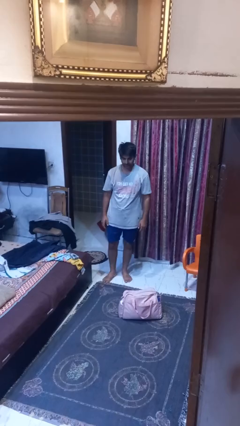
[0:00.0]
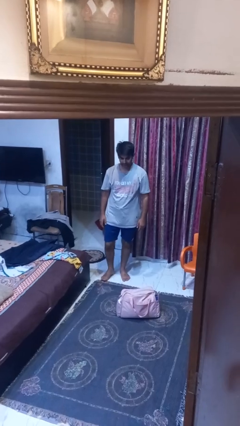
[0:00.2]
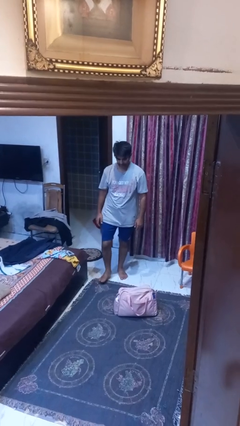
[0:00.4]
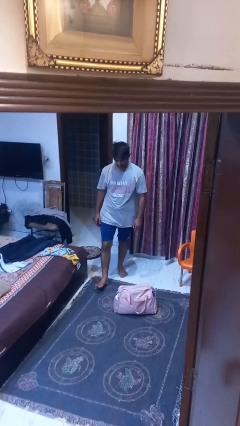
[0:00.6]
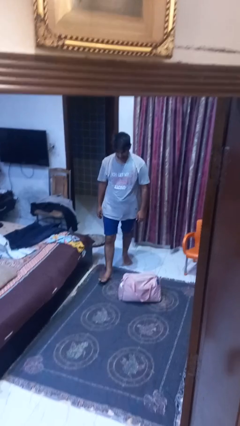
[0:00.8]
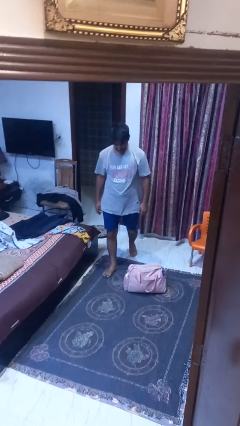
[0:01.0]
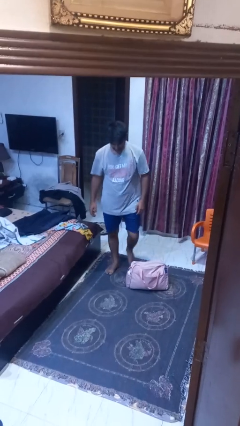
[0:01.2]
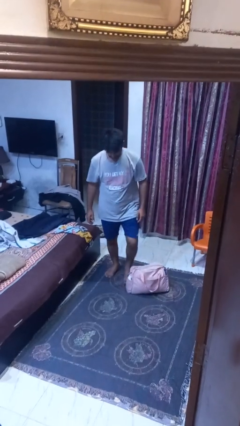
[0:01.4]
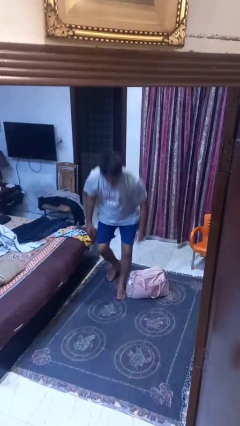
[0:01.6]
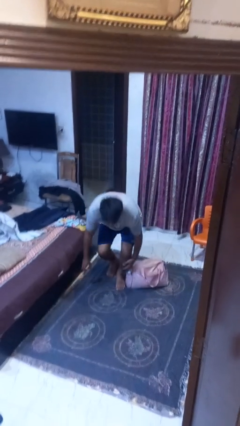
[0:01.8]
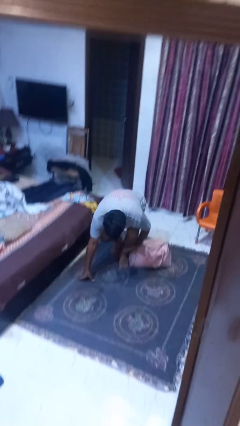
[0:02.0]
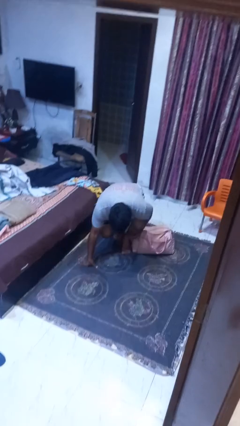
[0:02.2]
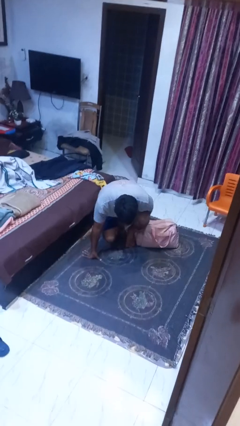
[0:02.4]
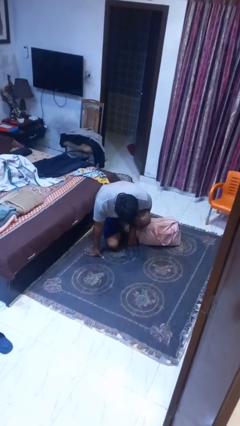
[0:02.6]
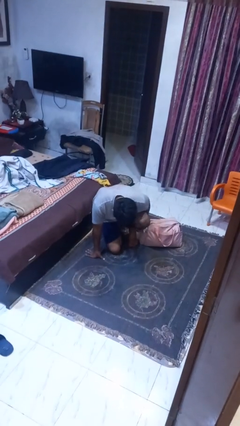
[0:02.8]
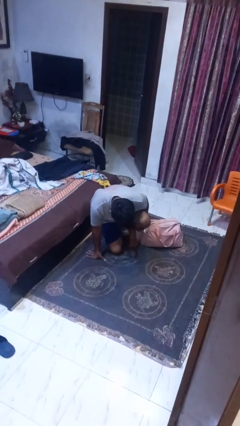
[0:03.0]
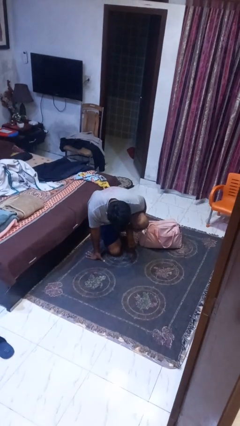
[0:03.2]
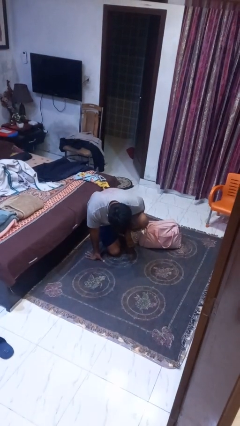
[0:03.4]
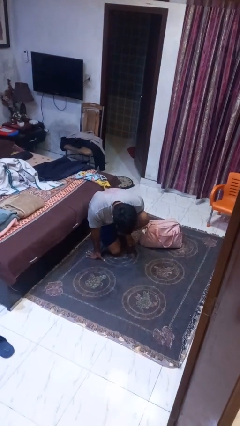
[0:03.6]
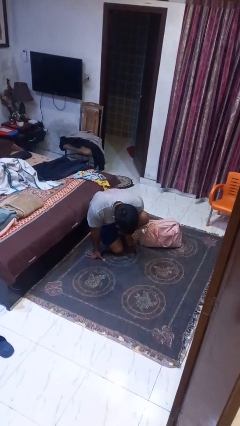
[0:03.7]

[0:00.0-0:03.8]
person trips on object on floor

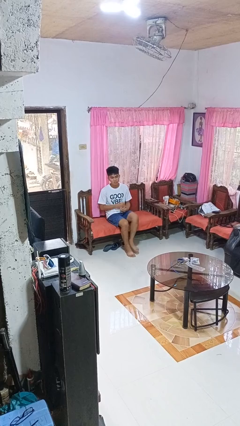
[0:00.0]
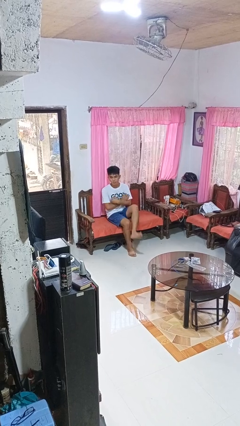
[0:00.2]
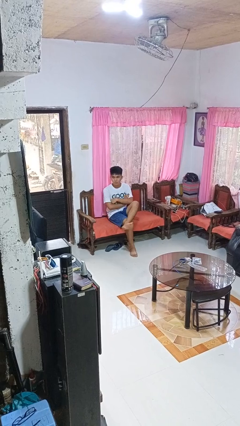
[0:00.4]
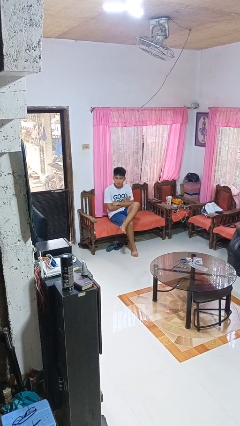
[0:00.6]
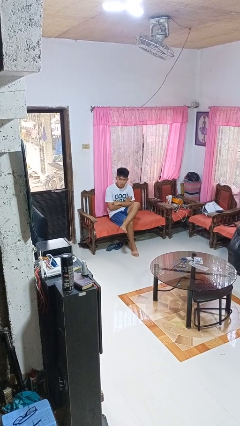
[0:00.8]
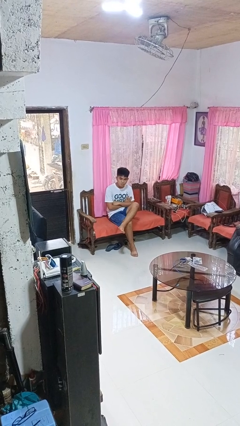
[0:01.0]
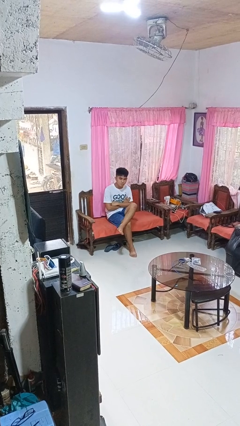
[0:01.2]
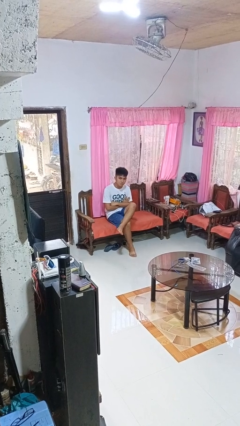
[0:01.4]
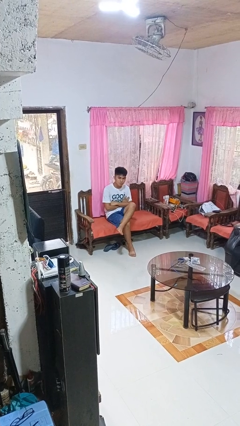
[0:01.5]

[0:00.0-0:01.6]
person crosses legs

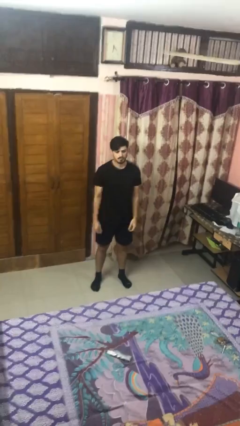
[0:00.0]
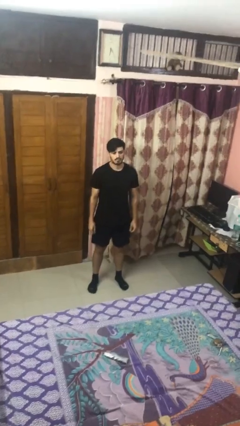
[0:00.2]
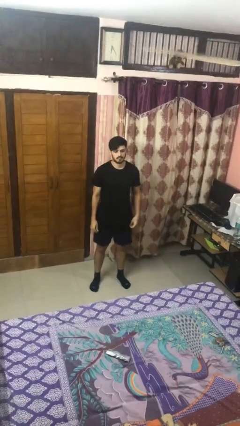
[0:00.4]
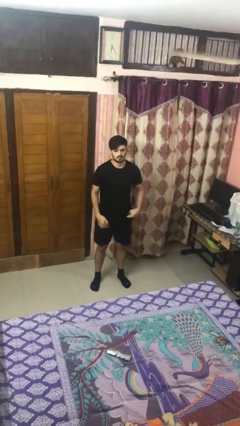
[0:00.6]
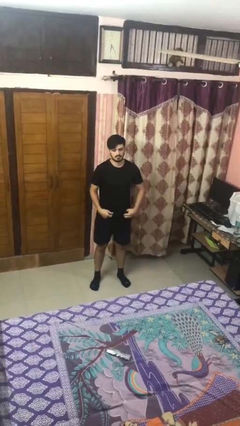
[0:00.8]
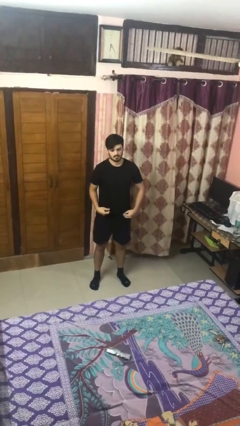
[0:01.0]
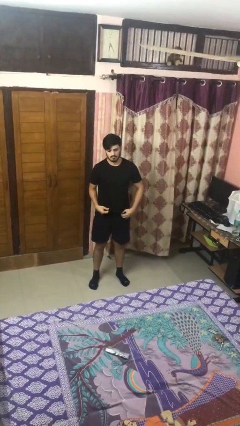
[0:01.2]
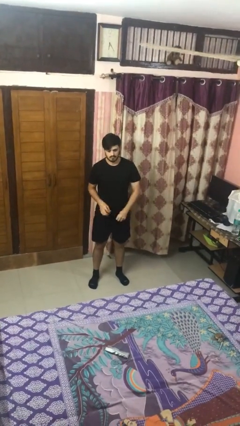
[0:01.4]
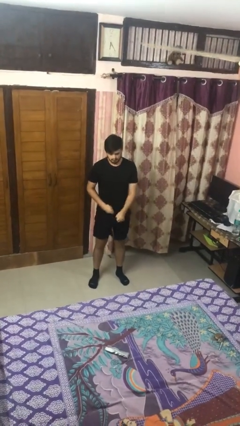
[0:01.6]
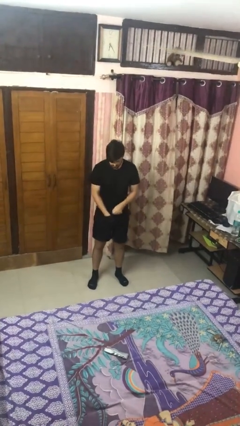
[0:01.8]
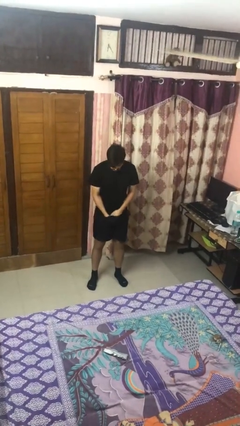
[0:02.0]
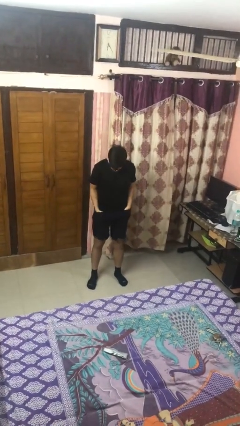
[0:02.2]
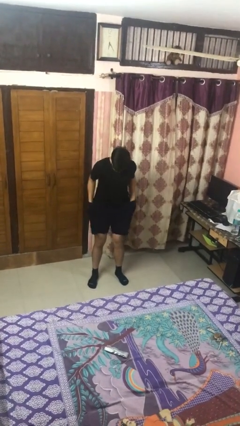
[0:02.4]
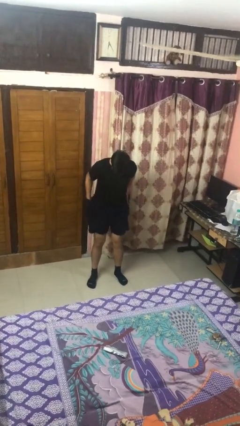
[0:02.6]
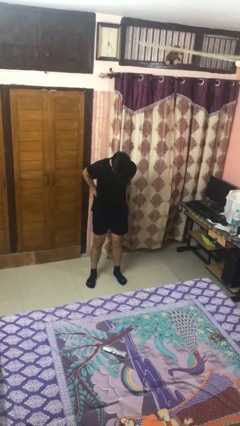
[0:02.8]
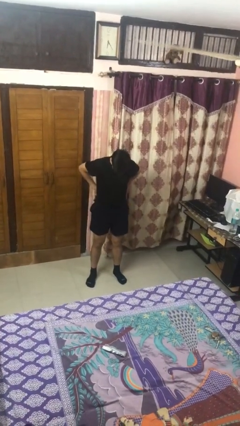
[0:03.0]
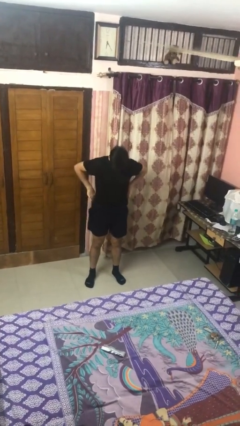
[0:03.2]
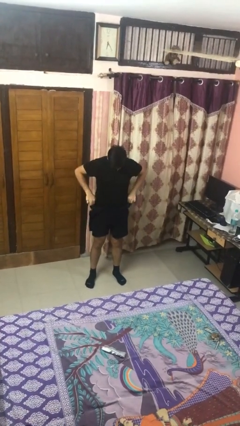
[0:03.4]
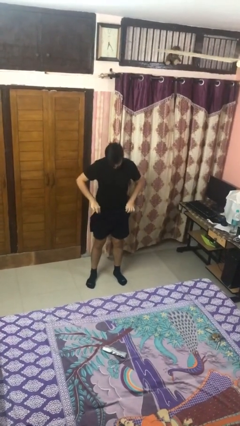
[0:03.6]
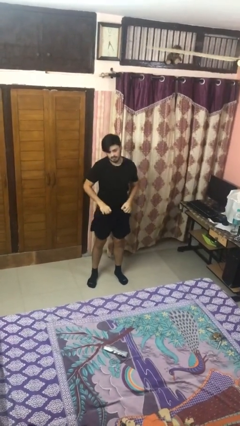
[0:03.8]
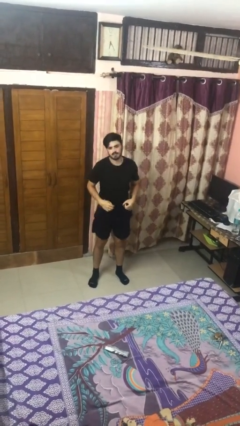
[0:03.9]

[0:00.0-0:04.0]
person tucks in shirt

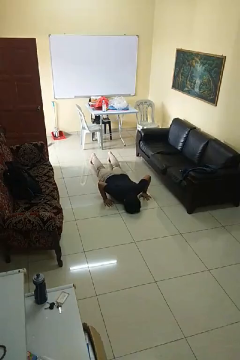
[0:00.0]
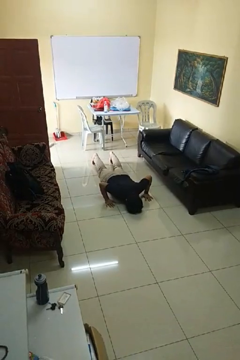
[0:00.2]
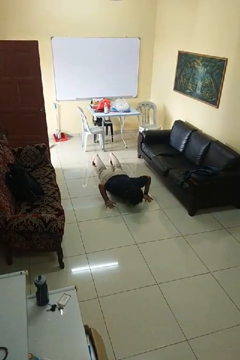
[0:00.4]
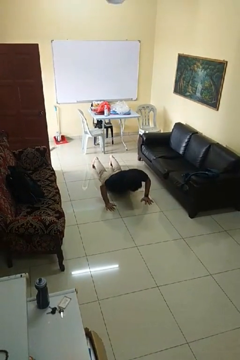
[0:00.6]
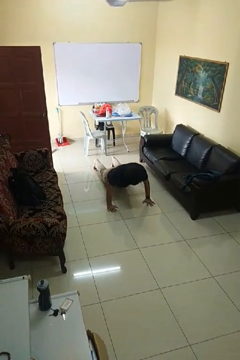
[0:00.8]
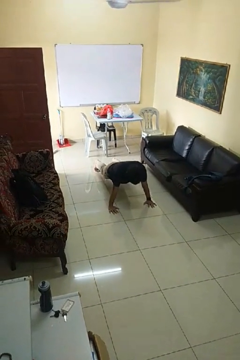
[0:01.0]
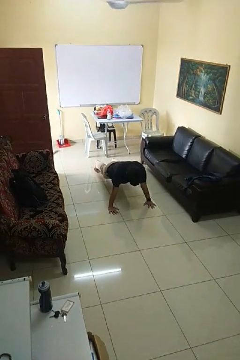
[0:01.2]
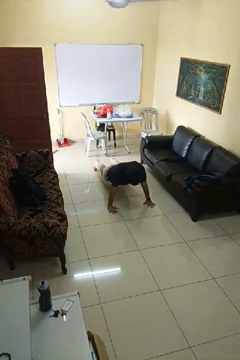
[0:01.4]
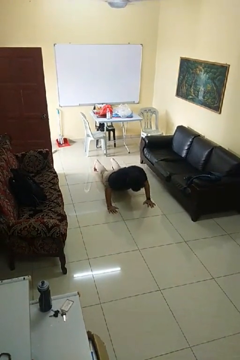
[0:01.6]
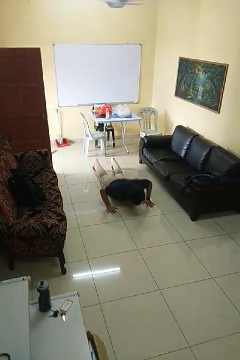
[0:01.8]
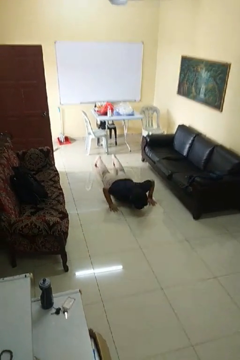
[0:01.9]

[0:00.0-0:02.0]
person exercises with pushup

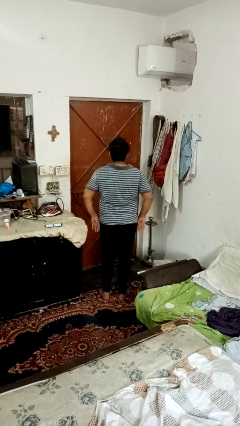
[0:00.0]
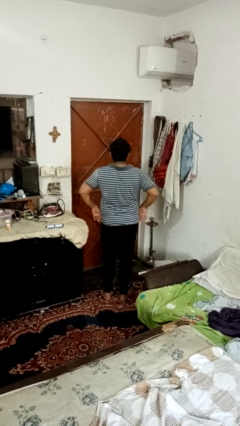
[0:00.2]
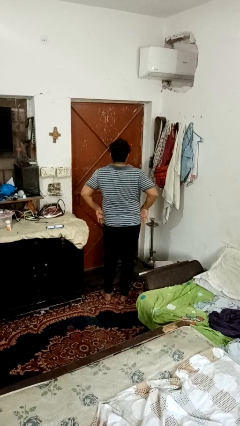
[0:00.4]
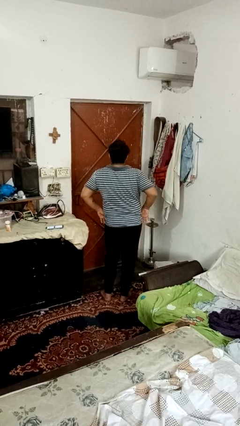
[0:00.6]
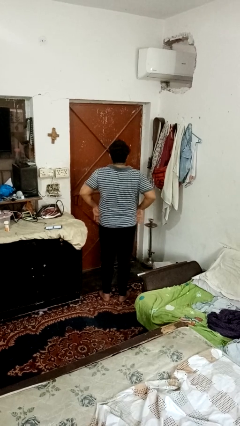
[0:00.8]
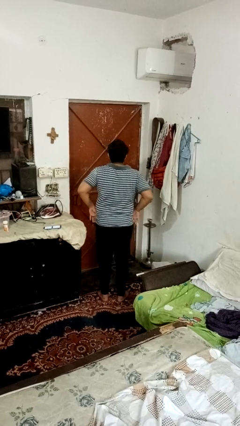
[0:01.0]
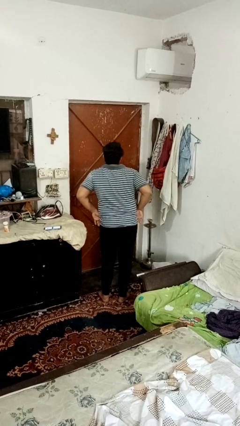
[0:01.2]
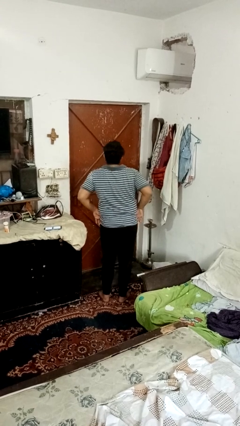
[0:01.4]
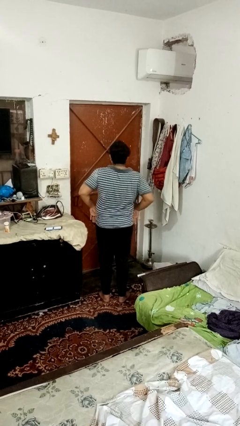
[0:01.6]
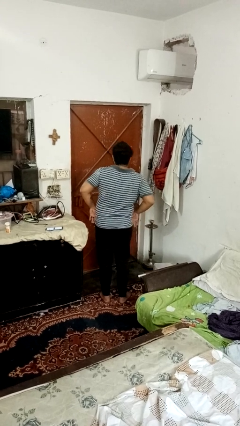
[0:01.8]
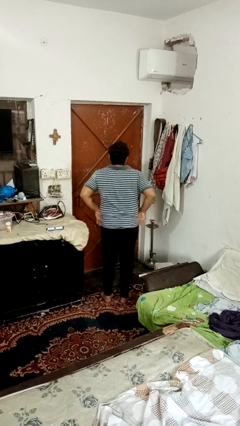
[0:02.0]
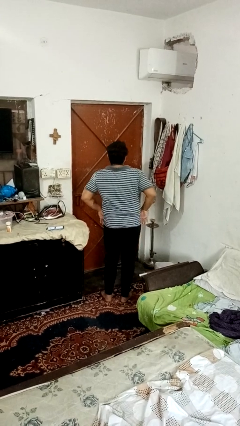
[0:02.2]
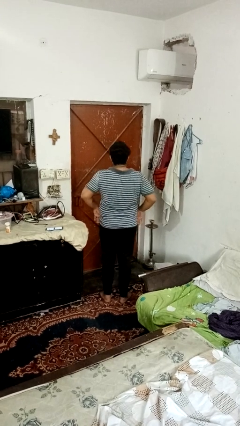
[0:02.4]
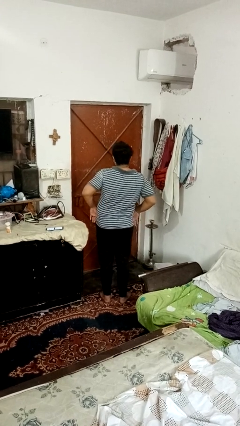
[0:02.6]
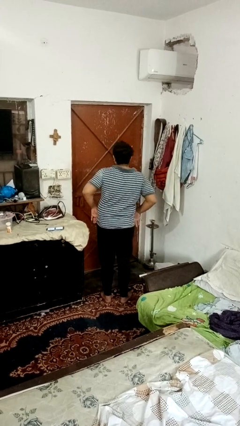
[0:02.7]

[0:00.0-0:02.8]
person wiggles hips

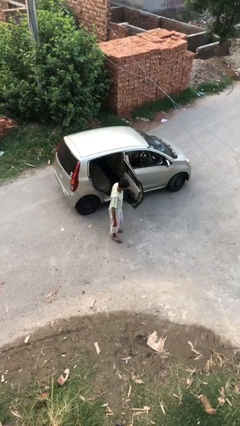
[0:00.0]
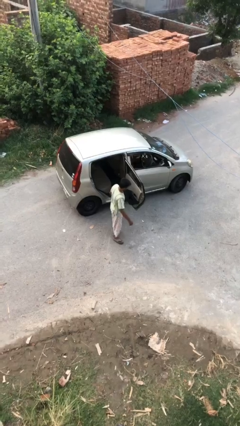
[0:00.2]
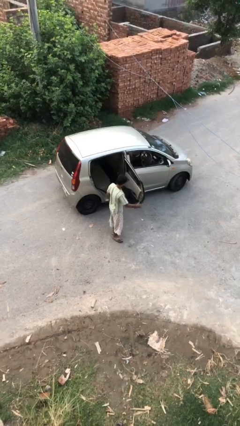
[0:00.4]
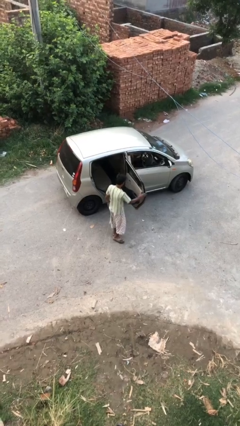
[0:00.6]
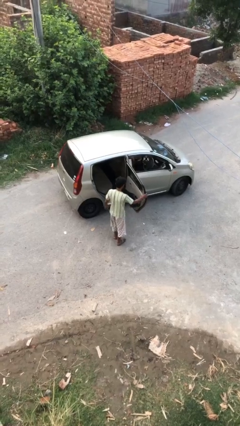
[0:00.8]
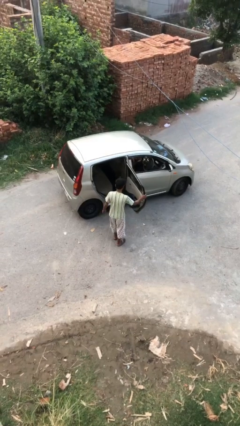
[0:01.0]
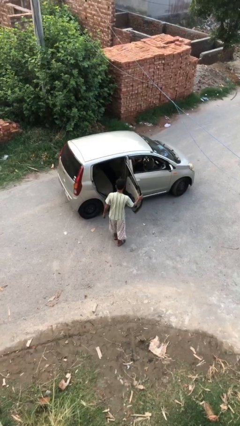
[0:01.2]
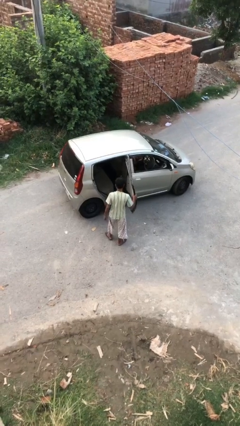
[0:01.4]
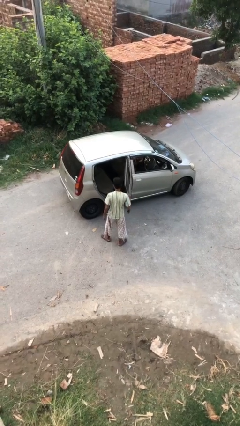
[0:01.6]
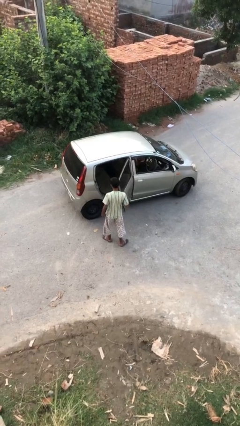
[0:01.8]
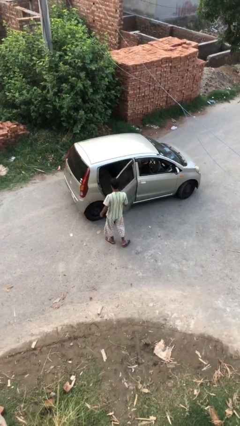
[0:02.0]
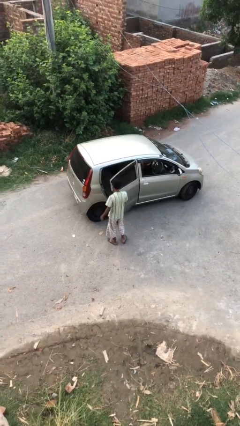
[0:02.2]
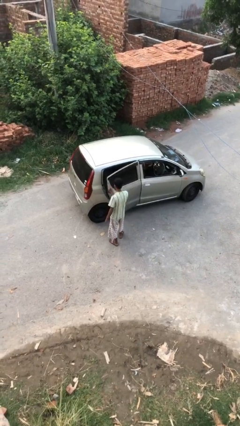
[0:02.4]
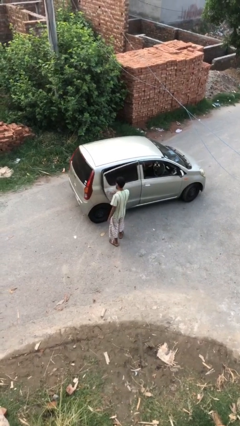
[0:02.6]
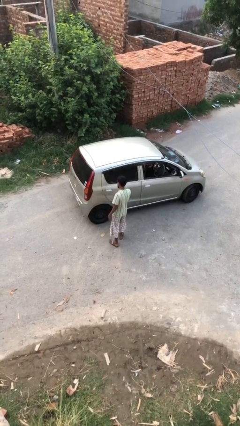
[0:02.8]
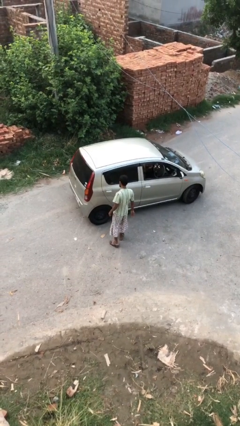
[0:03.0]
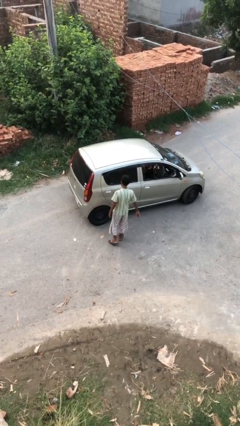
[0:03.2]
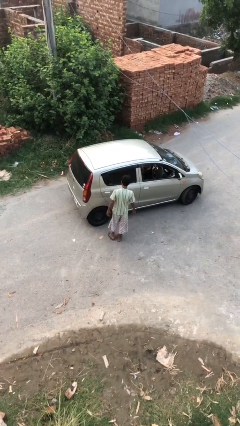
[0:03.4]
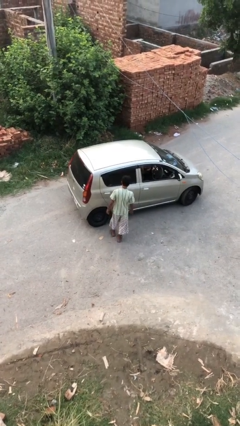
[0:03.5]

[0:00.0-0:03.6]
person closes car door
